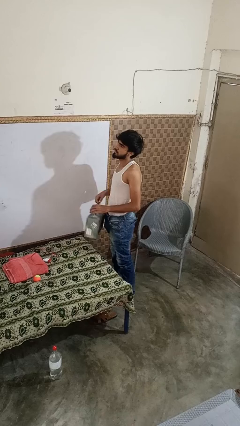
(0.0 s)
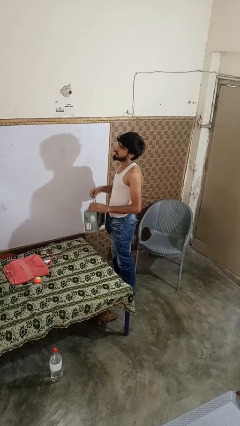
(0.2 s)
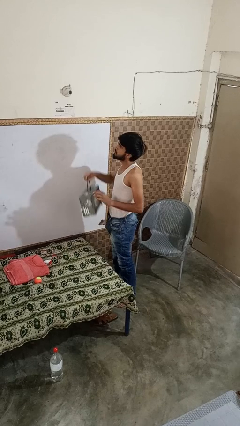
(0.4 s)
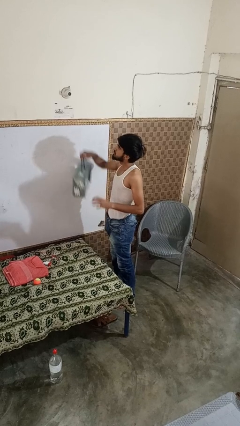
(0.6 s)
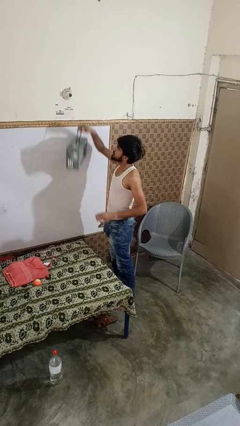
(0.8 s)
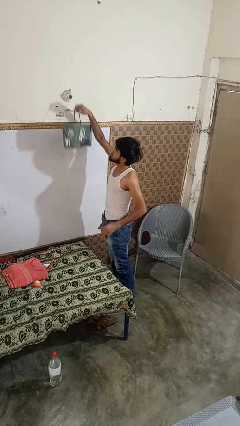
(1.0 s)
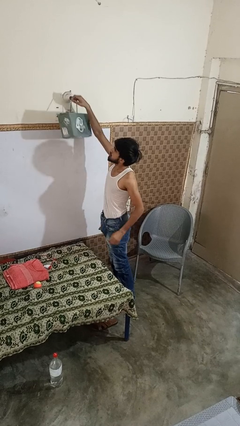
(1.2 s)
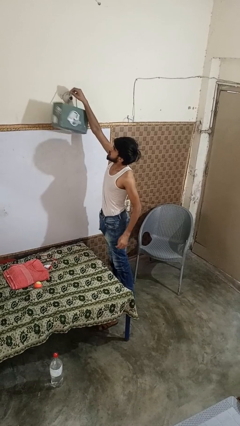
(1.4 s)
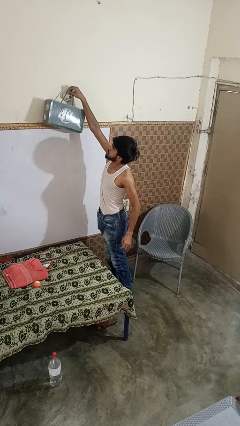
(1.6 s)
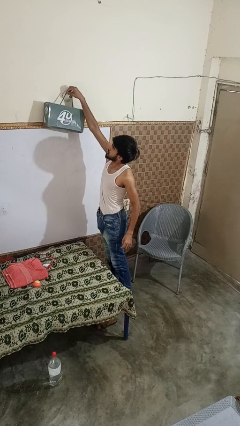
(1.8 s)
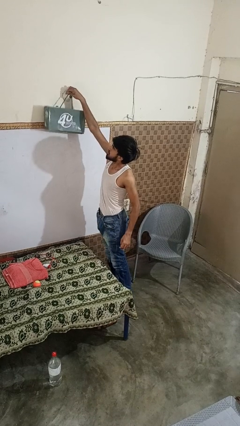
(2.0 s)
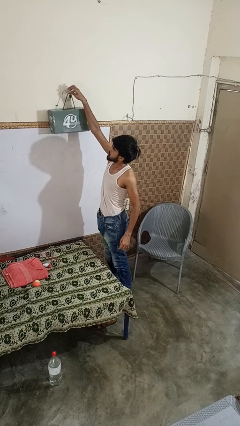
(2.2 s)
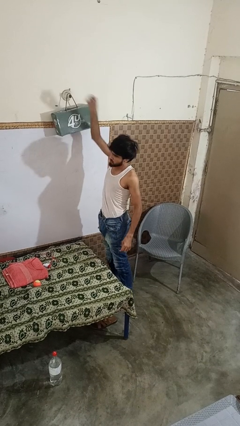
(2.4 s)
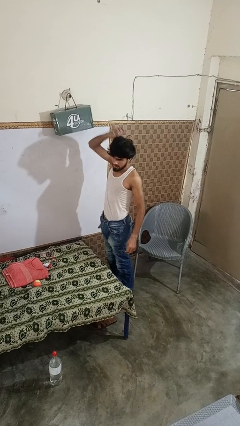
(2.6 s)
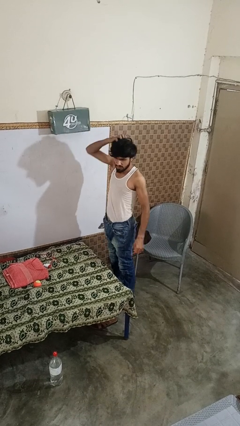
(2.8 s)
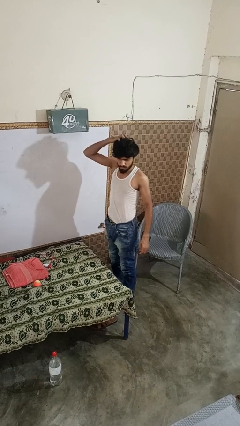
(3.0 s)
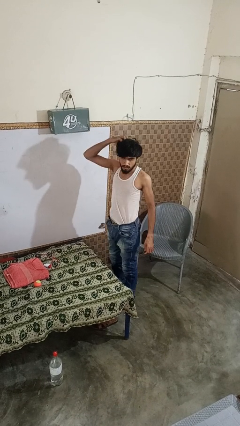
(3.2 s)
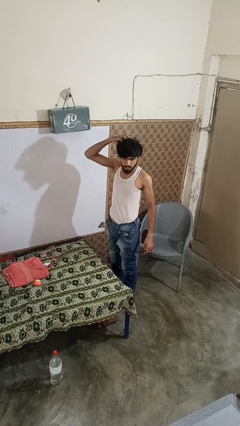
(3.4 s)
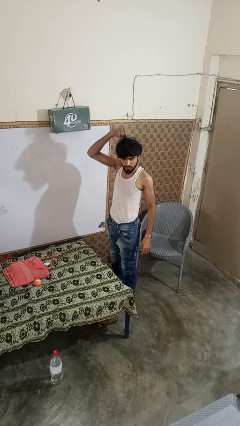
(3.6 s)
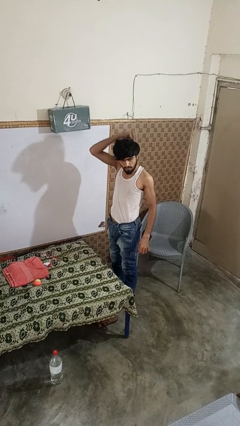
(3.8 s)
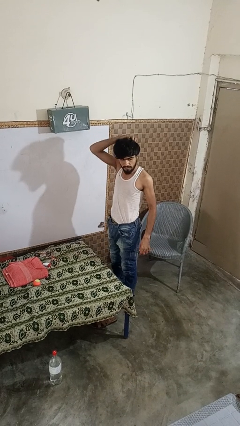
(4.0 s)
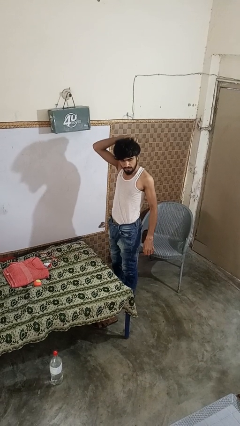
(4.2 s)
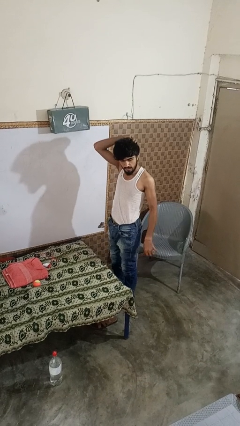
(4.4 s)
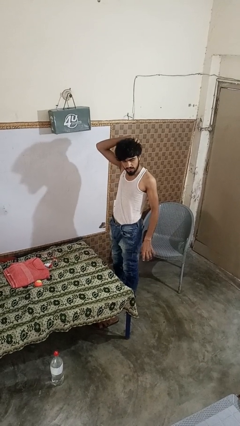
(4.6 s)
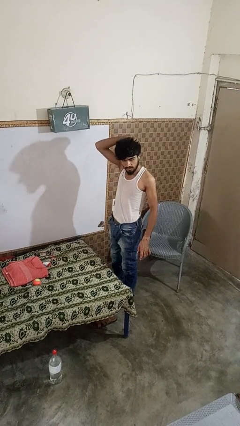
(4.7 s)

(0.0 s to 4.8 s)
person puts up smoke detector

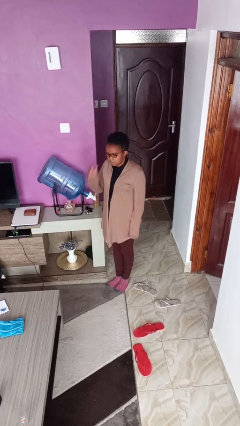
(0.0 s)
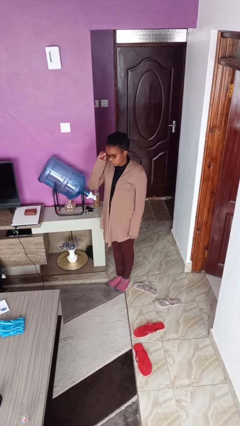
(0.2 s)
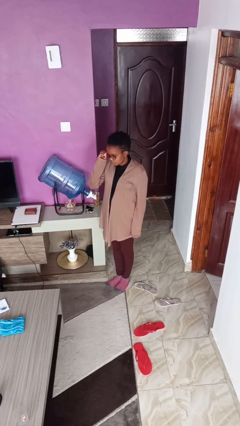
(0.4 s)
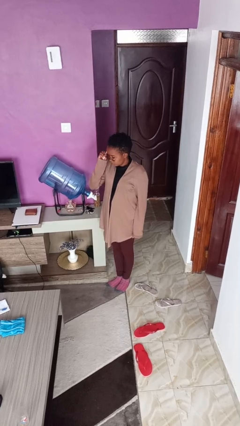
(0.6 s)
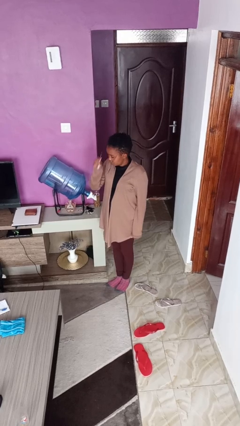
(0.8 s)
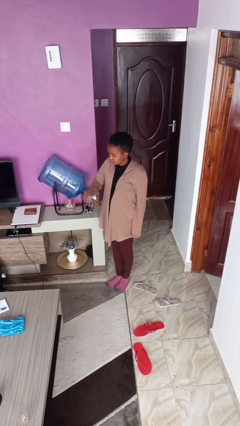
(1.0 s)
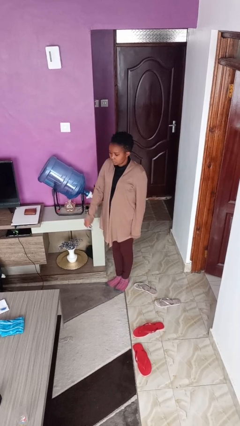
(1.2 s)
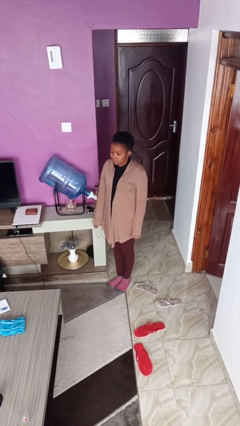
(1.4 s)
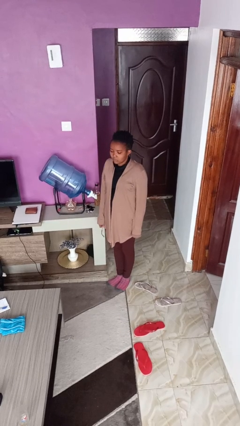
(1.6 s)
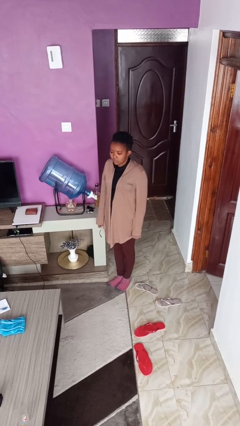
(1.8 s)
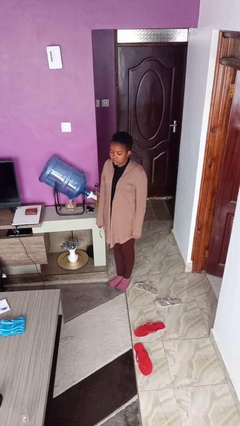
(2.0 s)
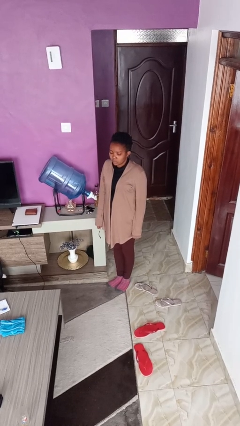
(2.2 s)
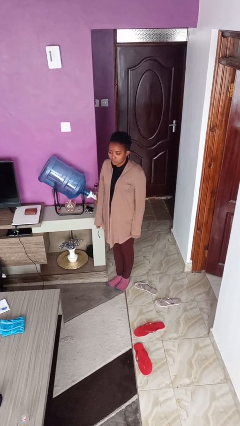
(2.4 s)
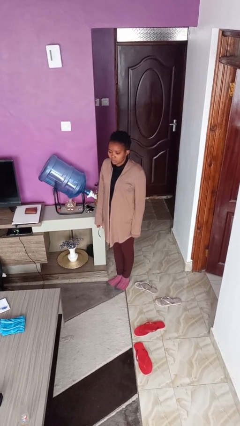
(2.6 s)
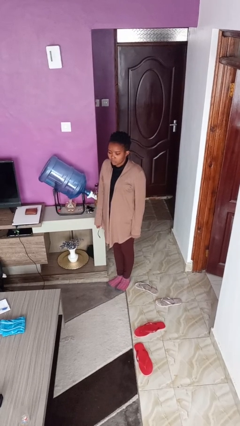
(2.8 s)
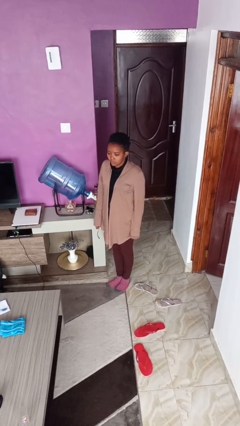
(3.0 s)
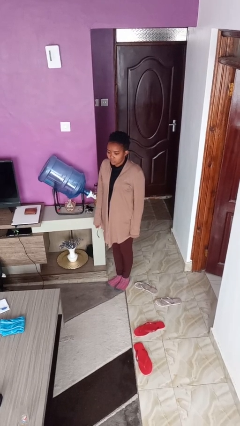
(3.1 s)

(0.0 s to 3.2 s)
person takes off glasses

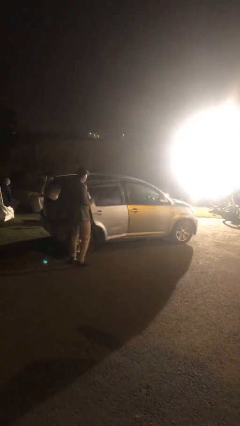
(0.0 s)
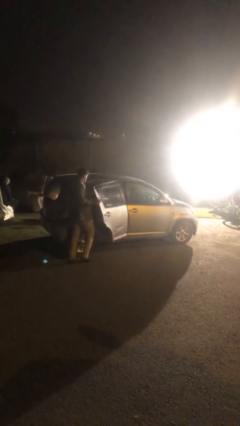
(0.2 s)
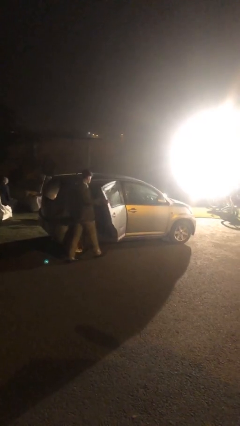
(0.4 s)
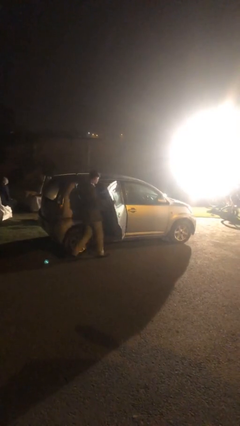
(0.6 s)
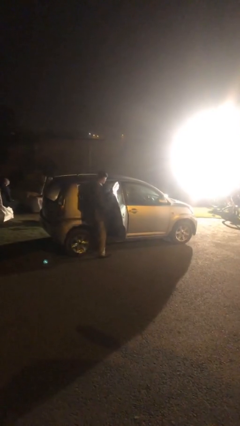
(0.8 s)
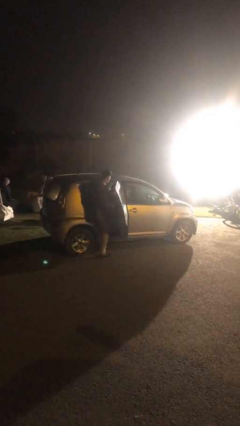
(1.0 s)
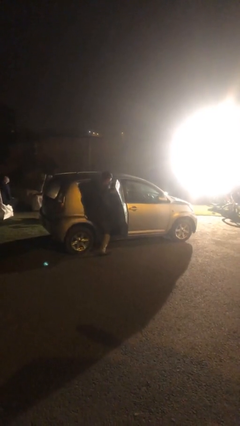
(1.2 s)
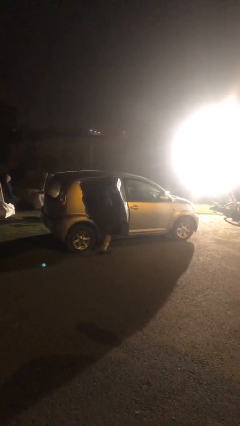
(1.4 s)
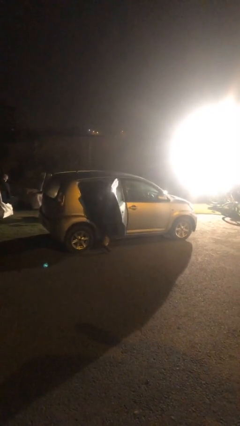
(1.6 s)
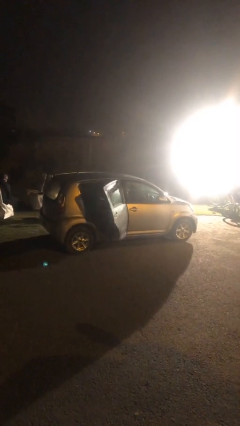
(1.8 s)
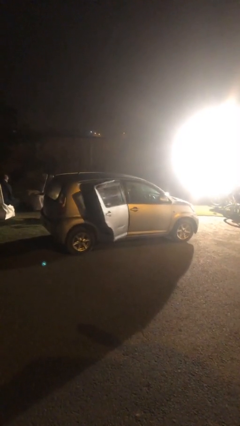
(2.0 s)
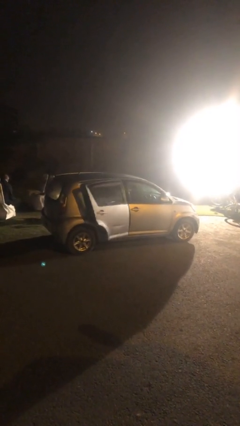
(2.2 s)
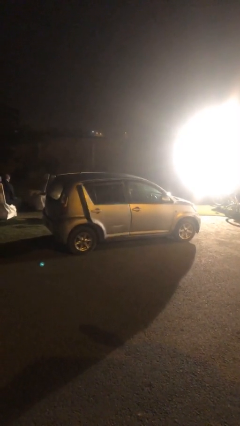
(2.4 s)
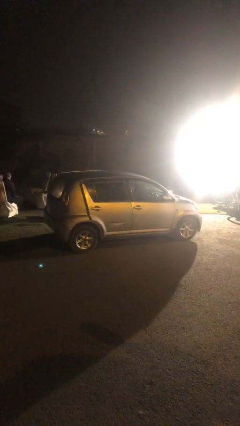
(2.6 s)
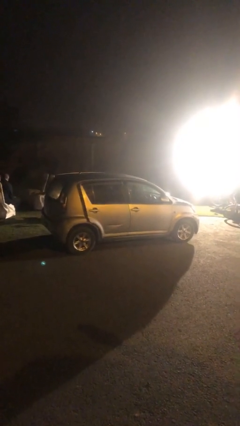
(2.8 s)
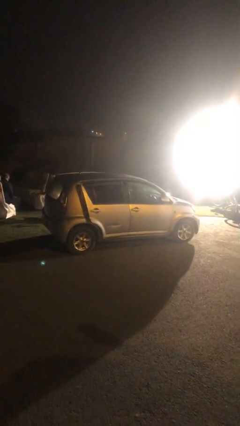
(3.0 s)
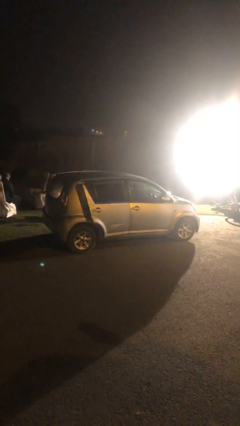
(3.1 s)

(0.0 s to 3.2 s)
car picks up person

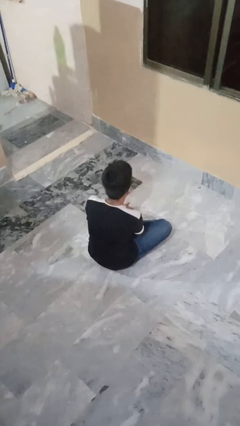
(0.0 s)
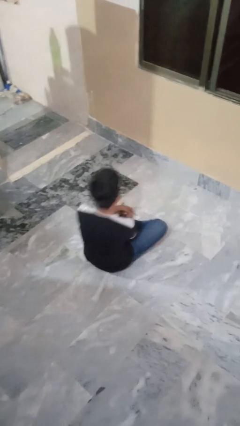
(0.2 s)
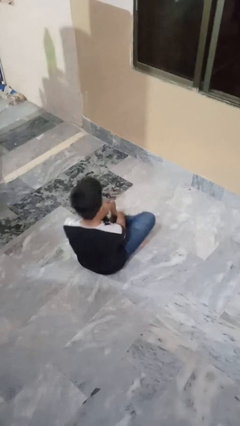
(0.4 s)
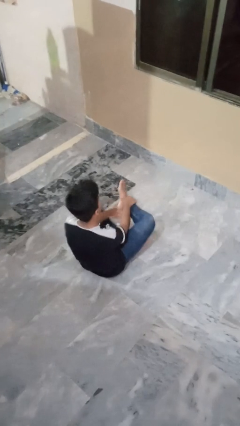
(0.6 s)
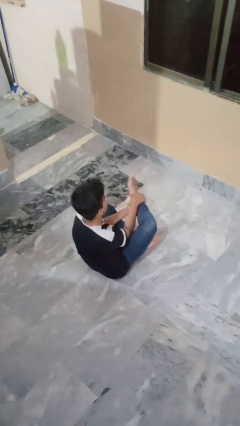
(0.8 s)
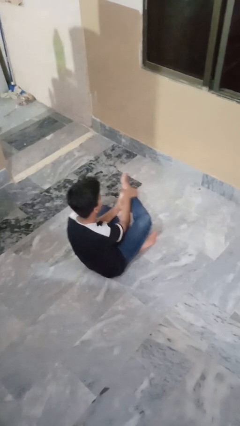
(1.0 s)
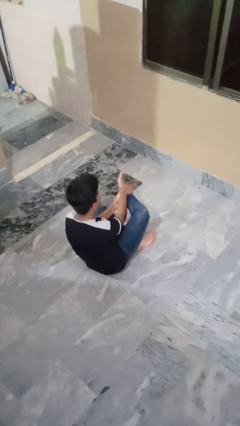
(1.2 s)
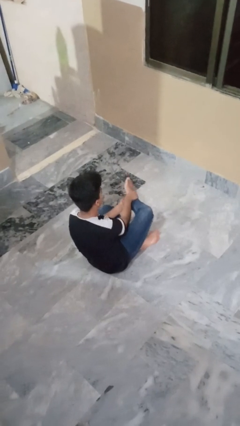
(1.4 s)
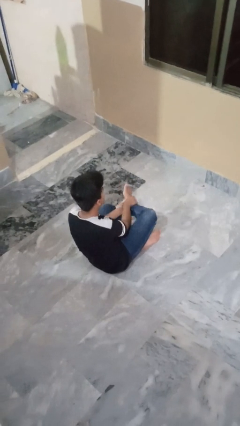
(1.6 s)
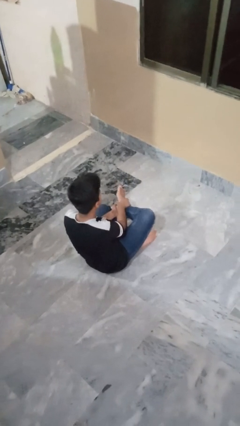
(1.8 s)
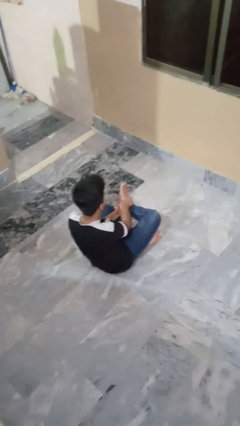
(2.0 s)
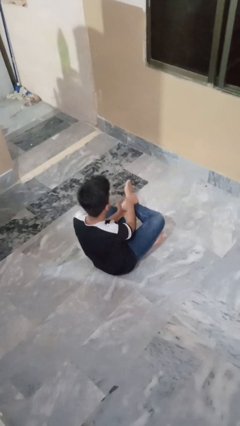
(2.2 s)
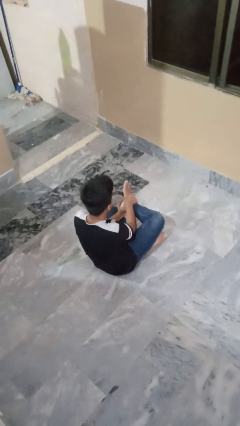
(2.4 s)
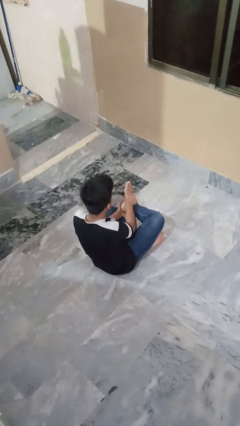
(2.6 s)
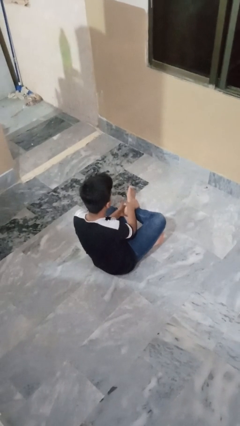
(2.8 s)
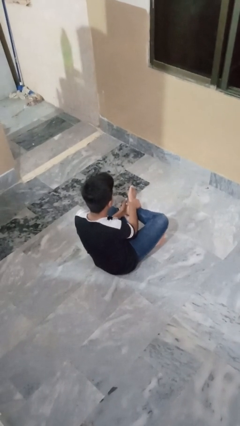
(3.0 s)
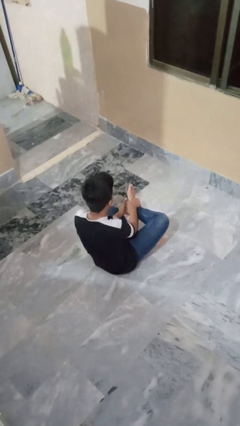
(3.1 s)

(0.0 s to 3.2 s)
person stubs toe

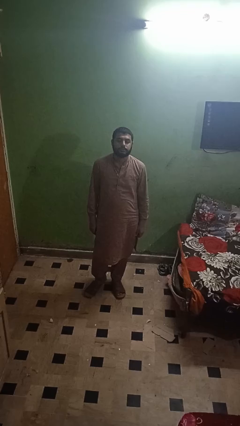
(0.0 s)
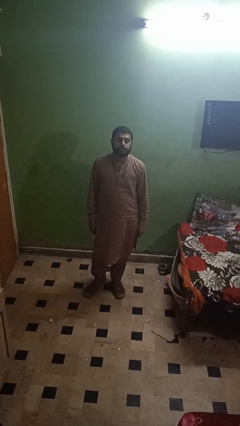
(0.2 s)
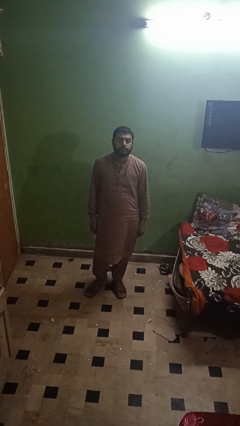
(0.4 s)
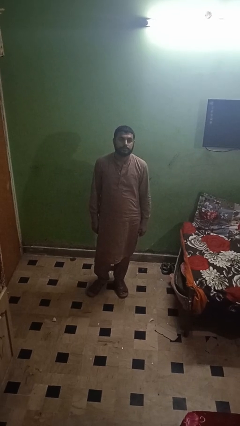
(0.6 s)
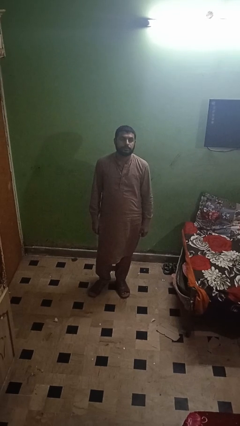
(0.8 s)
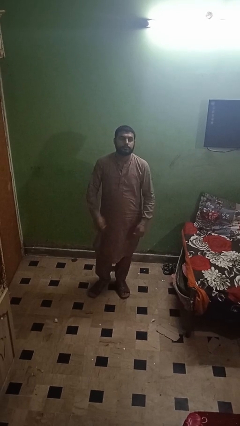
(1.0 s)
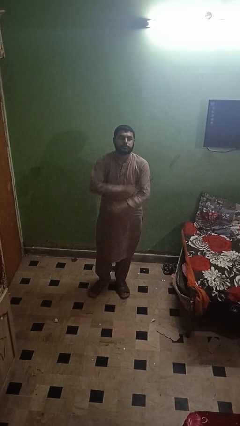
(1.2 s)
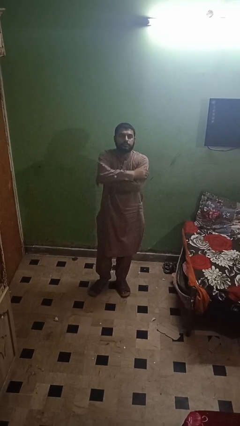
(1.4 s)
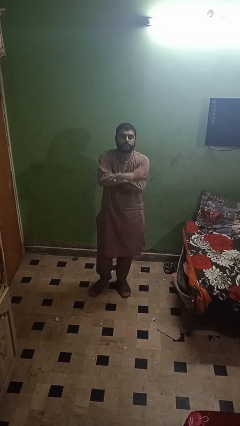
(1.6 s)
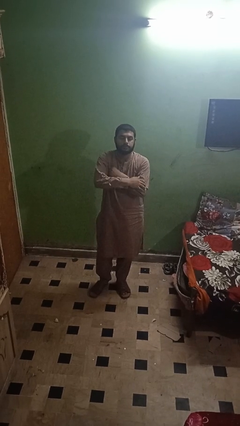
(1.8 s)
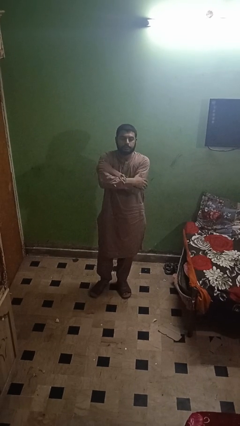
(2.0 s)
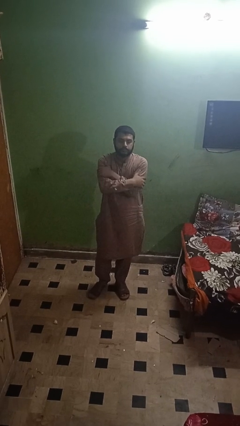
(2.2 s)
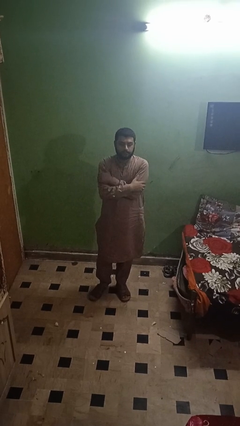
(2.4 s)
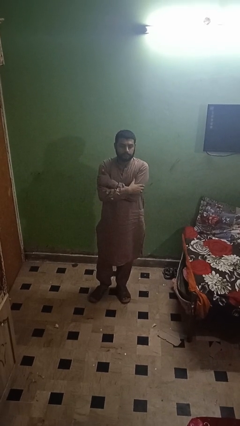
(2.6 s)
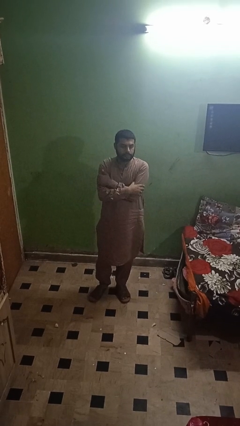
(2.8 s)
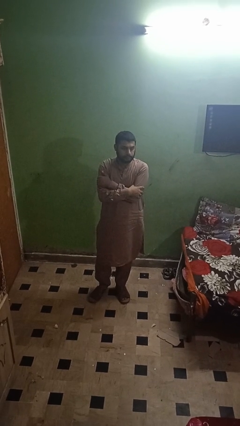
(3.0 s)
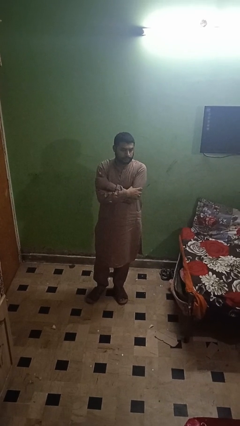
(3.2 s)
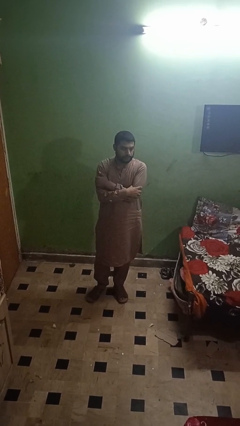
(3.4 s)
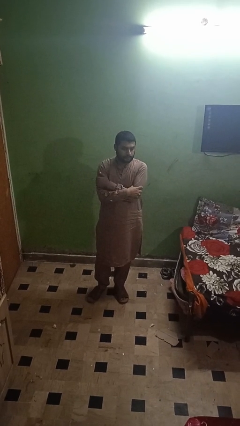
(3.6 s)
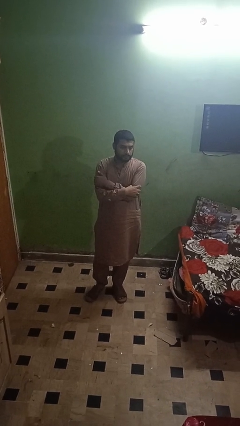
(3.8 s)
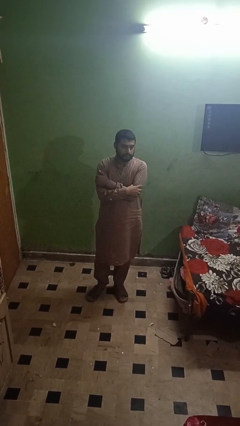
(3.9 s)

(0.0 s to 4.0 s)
person crosses arms
